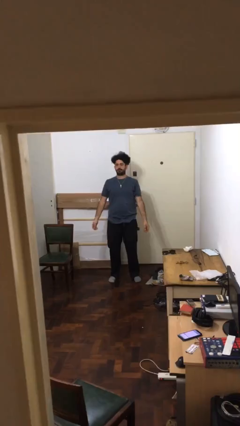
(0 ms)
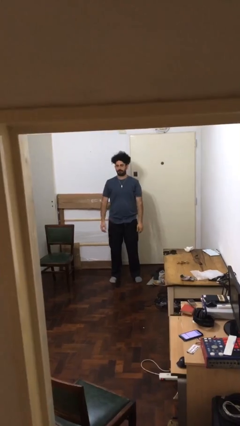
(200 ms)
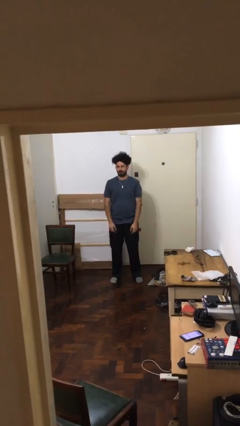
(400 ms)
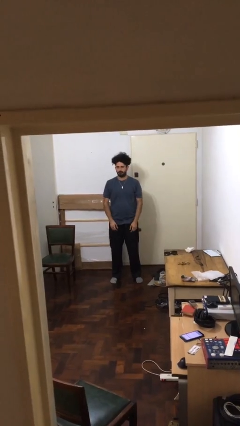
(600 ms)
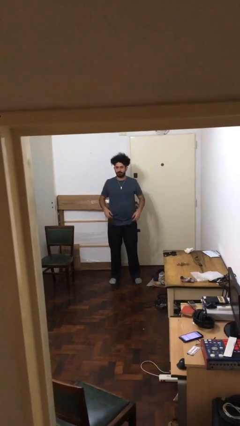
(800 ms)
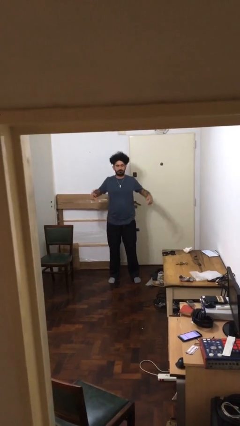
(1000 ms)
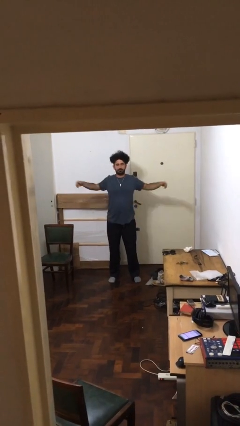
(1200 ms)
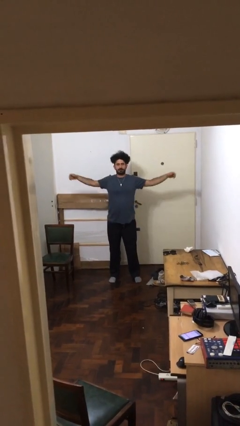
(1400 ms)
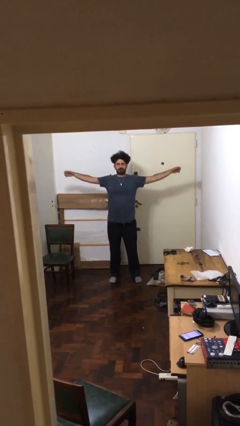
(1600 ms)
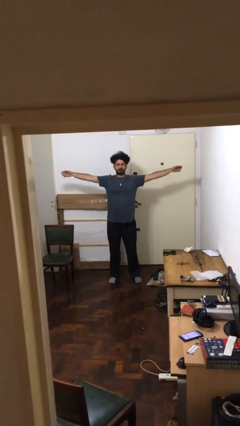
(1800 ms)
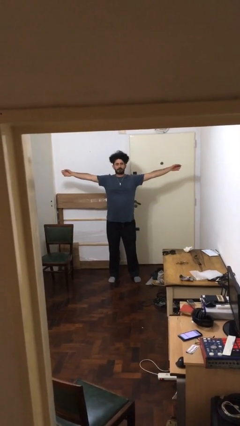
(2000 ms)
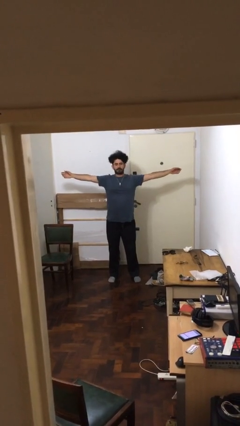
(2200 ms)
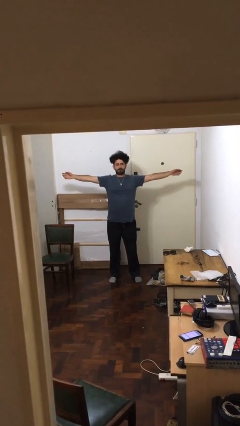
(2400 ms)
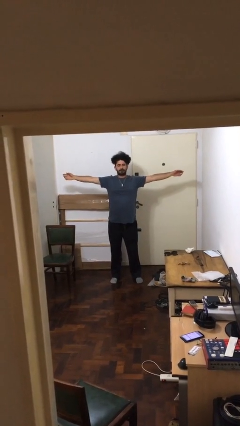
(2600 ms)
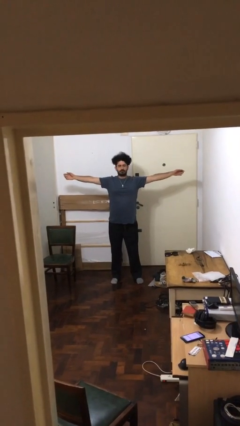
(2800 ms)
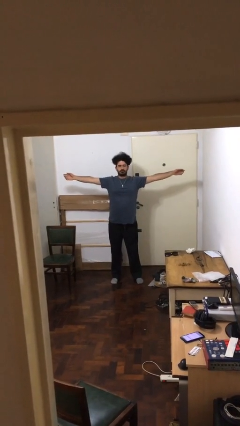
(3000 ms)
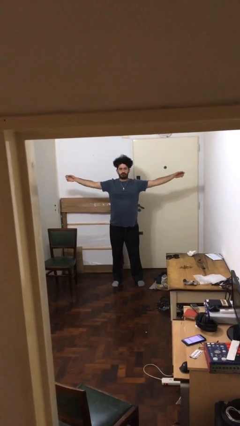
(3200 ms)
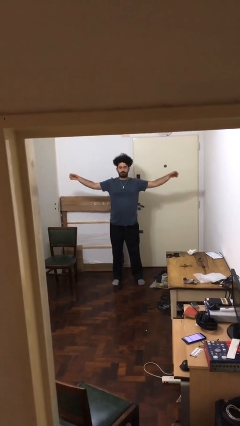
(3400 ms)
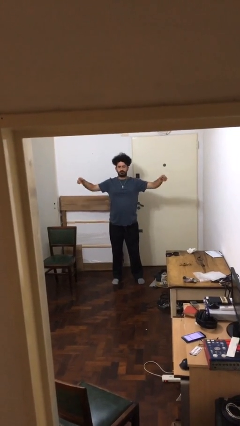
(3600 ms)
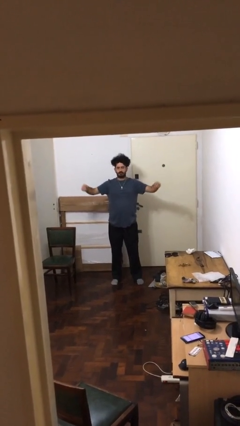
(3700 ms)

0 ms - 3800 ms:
person stretches arms to side

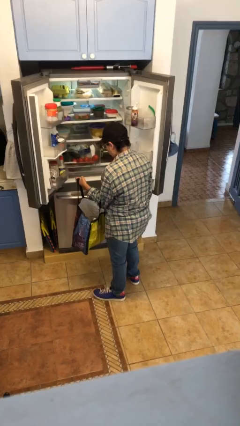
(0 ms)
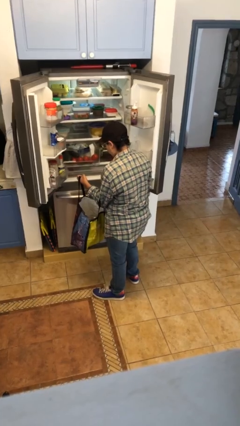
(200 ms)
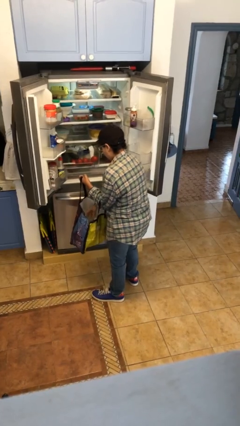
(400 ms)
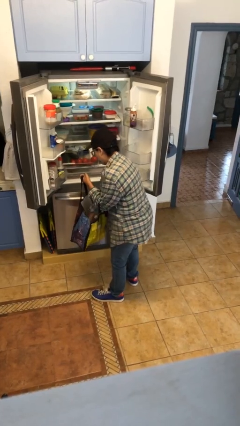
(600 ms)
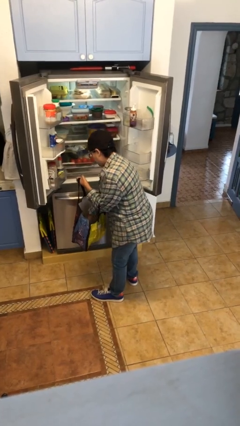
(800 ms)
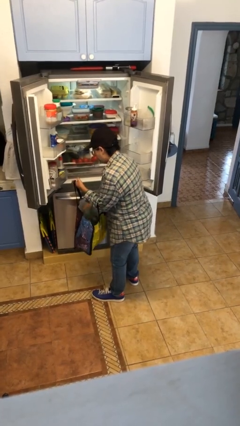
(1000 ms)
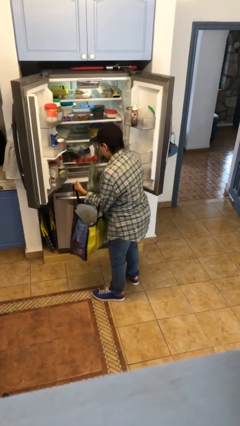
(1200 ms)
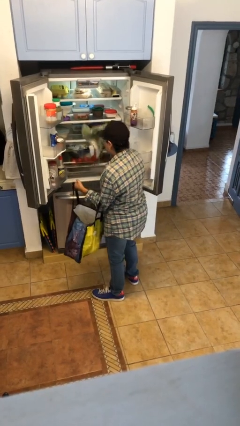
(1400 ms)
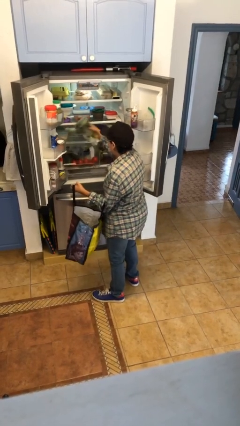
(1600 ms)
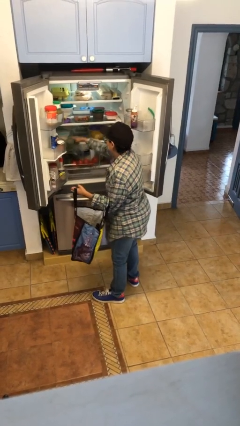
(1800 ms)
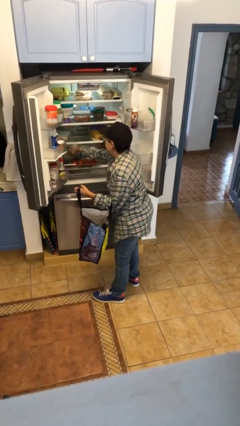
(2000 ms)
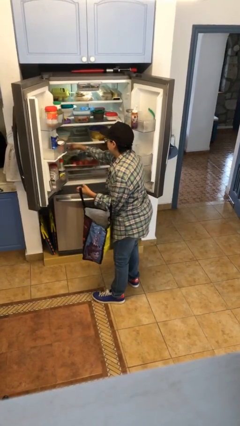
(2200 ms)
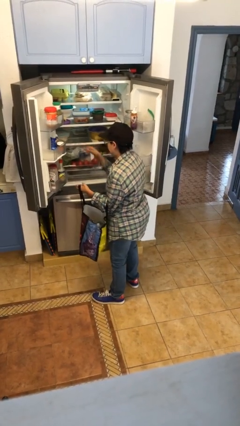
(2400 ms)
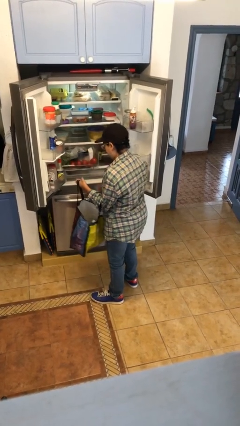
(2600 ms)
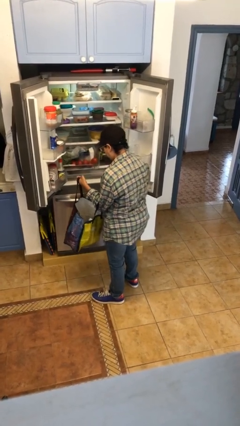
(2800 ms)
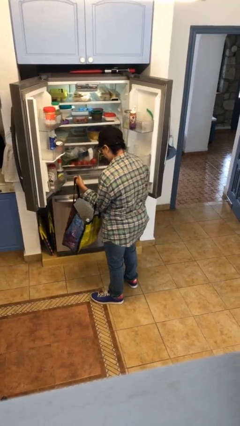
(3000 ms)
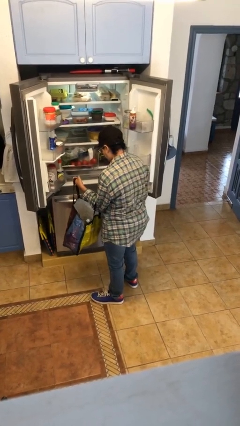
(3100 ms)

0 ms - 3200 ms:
person loads groceries into refrigerator

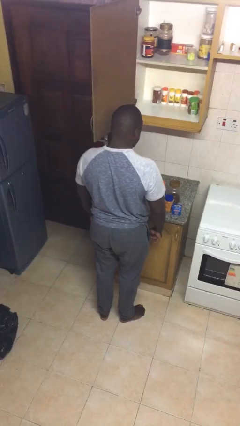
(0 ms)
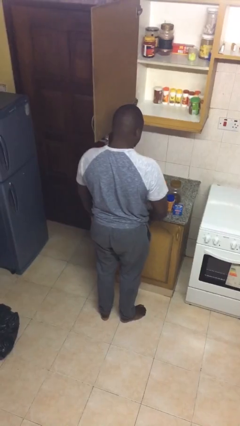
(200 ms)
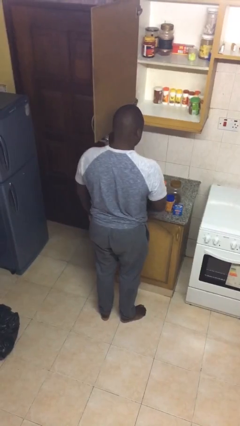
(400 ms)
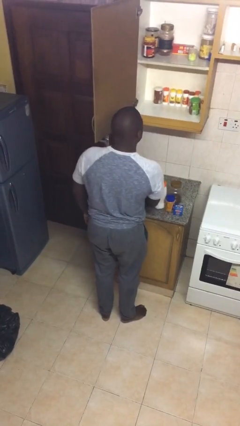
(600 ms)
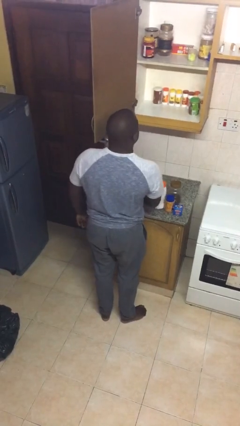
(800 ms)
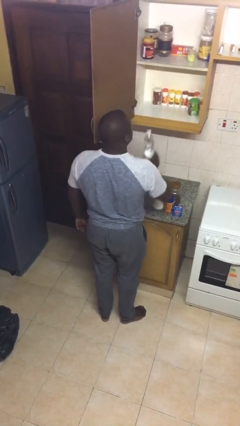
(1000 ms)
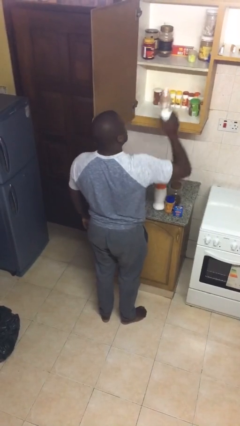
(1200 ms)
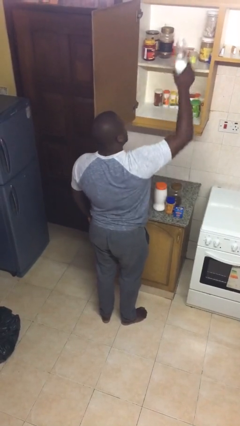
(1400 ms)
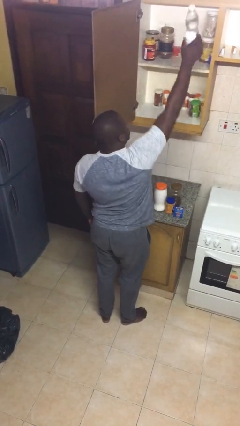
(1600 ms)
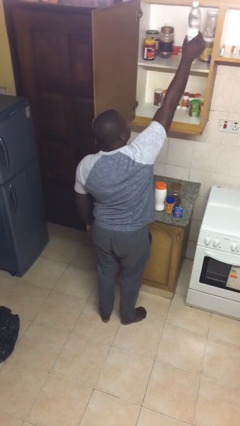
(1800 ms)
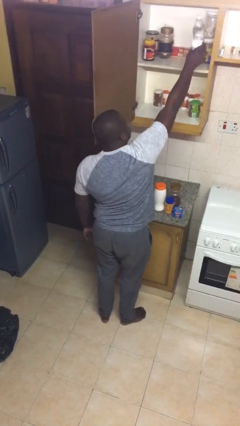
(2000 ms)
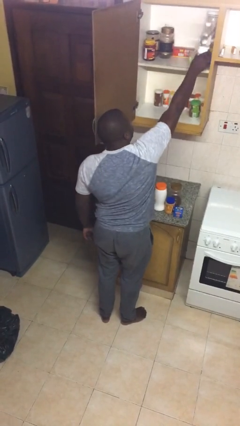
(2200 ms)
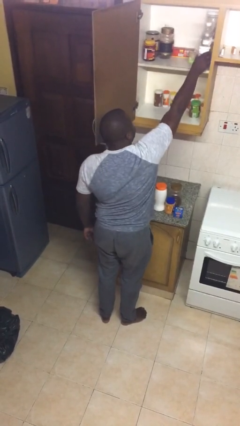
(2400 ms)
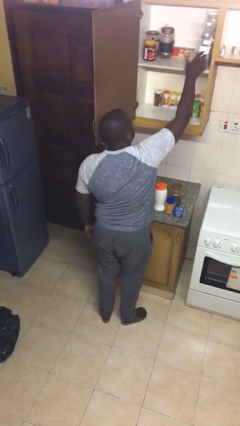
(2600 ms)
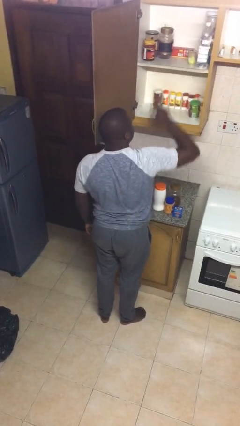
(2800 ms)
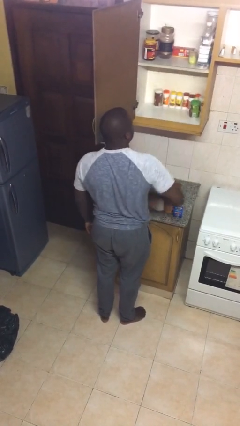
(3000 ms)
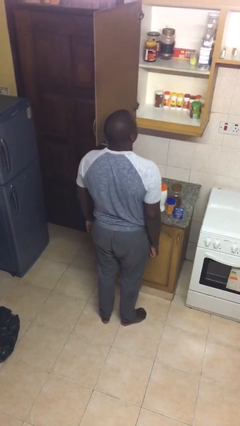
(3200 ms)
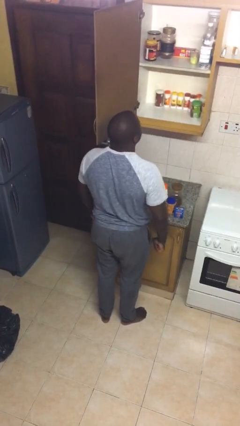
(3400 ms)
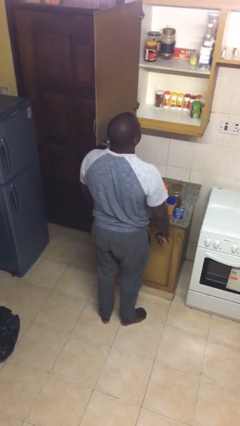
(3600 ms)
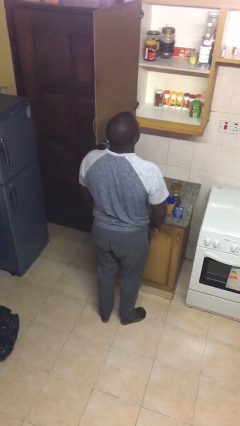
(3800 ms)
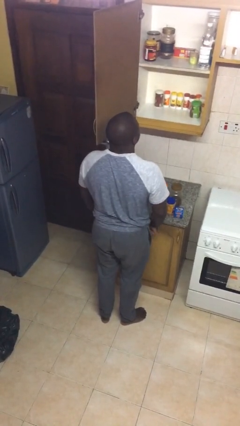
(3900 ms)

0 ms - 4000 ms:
person puts object in cabinet

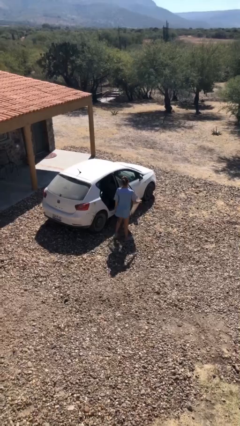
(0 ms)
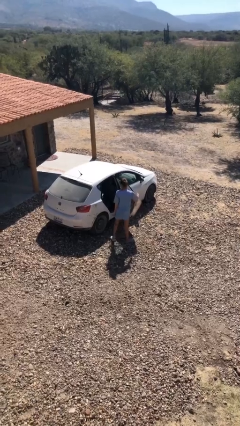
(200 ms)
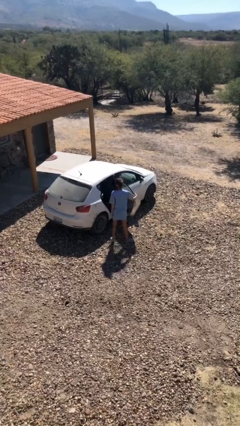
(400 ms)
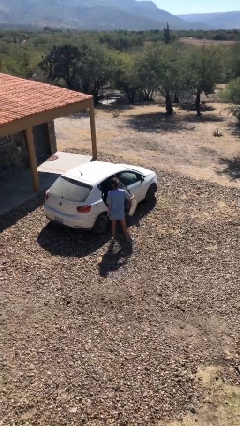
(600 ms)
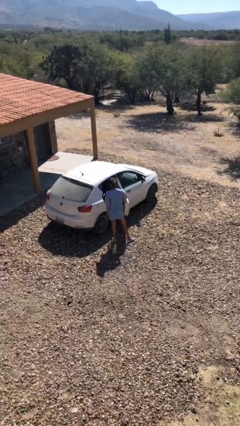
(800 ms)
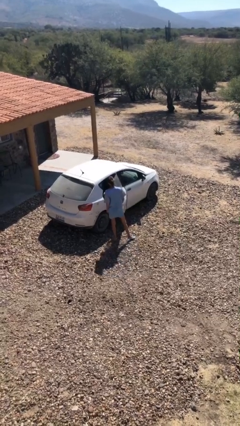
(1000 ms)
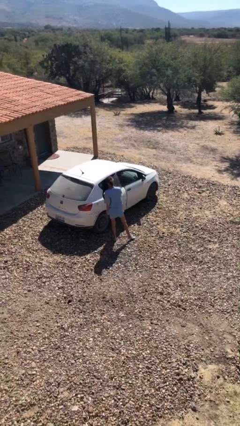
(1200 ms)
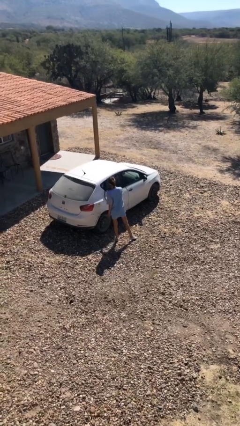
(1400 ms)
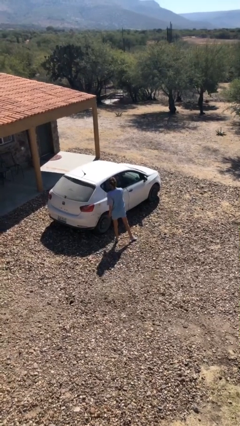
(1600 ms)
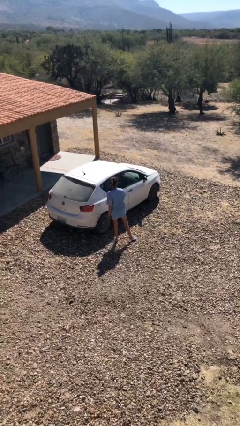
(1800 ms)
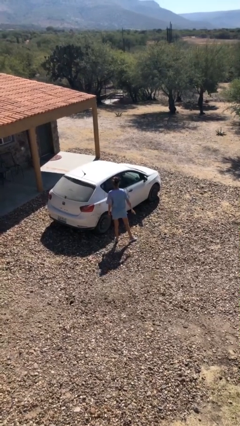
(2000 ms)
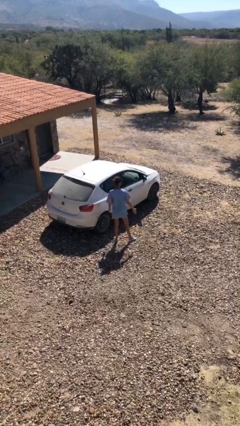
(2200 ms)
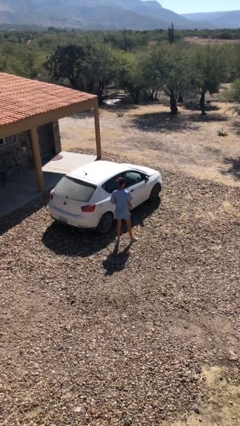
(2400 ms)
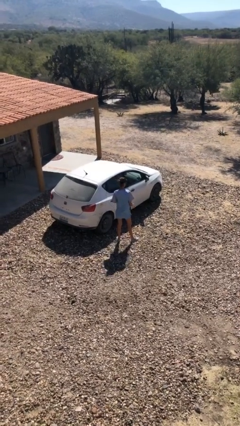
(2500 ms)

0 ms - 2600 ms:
person closes car door

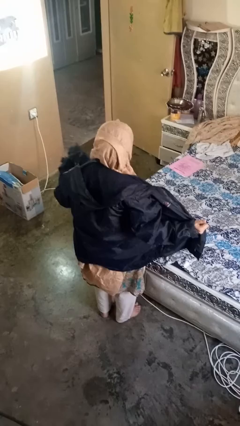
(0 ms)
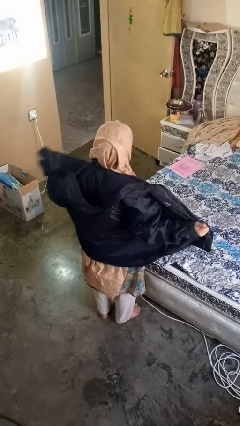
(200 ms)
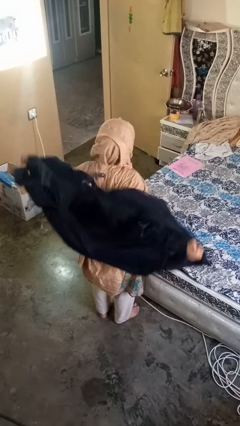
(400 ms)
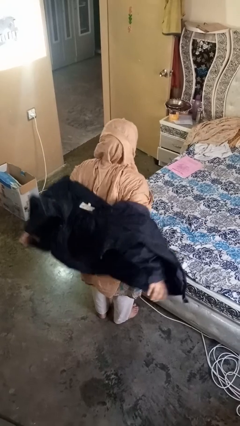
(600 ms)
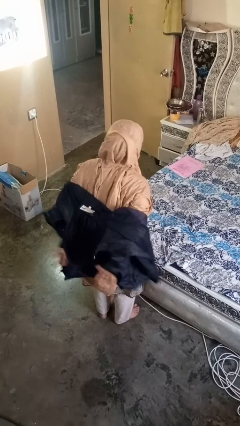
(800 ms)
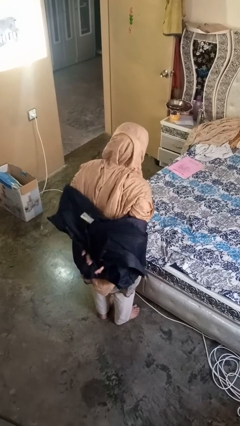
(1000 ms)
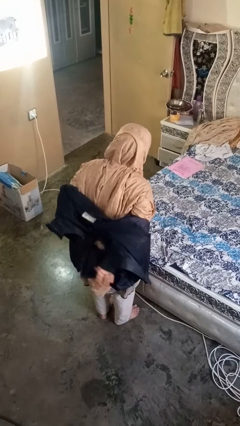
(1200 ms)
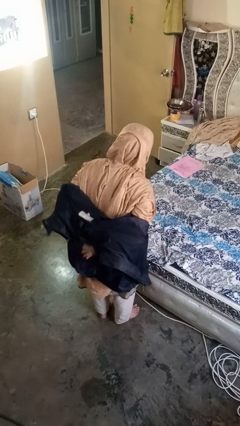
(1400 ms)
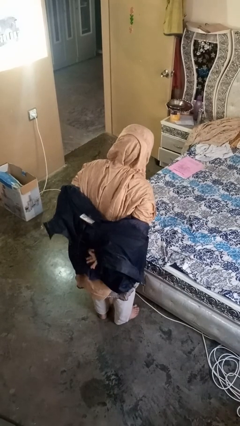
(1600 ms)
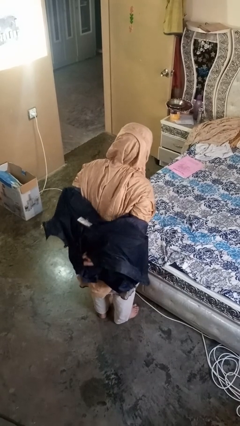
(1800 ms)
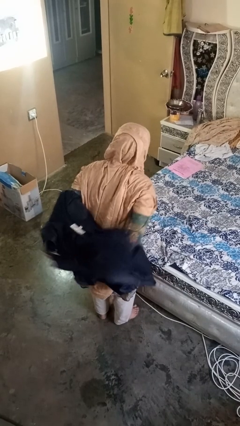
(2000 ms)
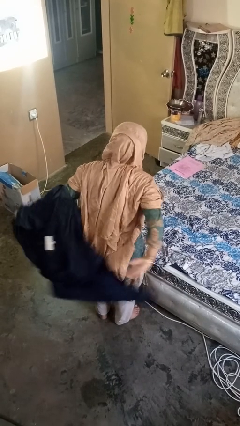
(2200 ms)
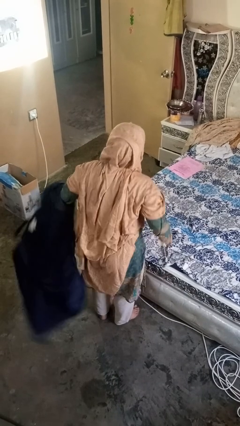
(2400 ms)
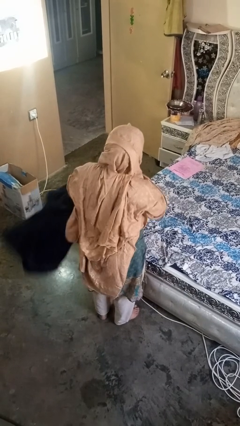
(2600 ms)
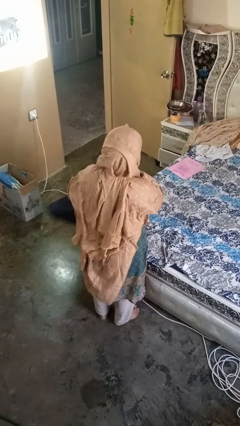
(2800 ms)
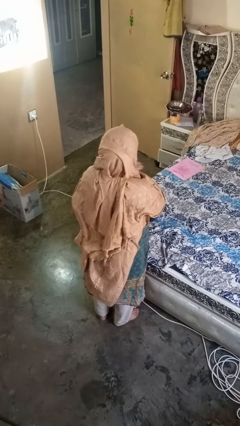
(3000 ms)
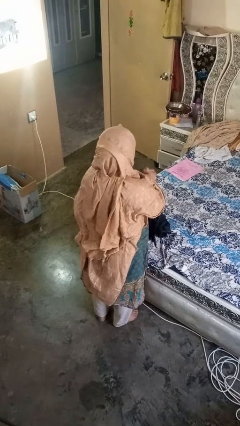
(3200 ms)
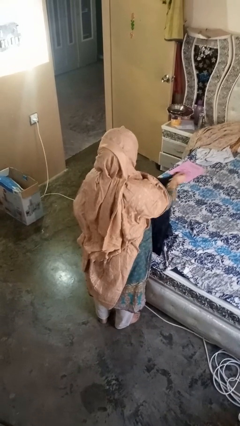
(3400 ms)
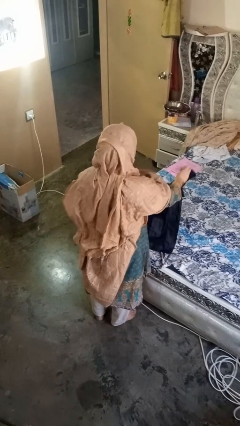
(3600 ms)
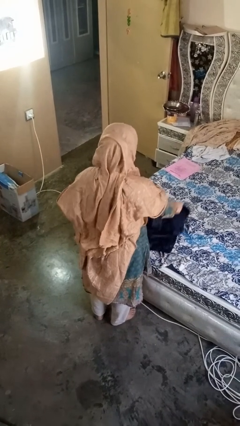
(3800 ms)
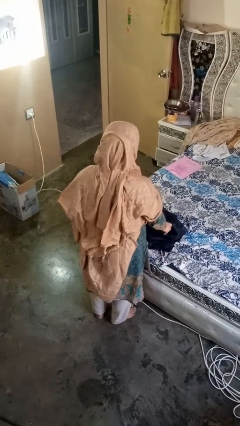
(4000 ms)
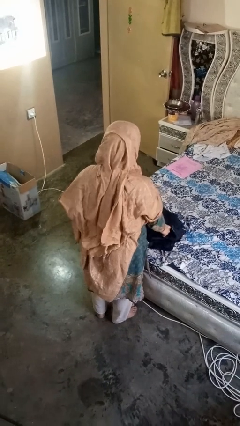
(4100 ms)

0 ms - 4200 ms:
person takes off jacket
